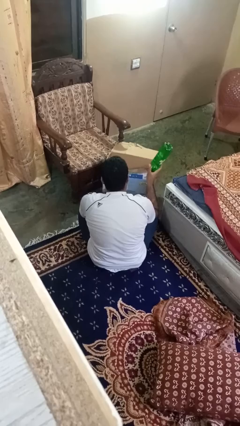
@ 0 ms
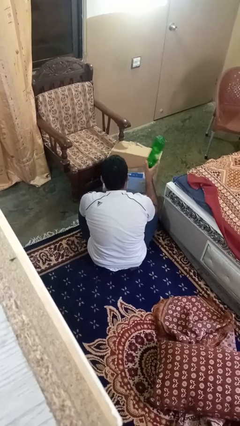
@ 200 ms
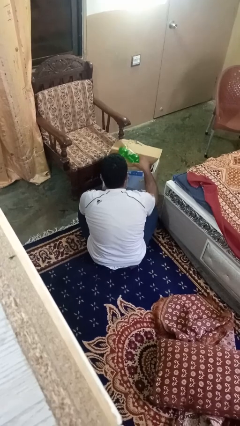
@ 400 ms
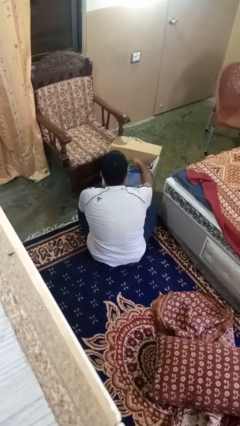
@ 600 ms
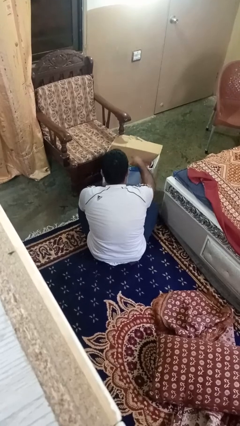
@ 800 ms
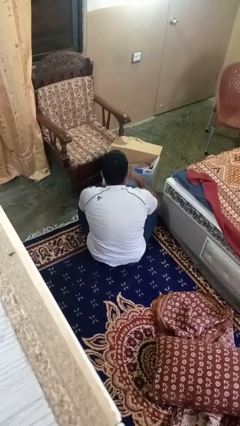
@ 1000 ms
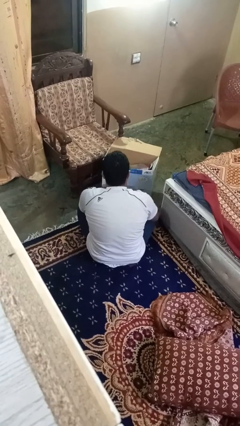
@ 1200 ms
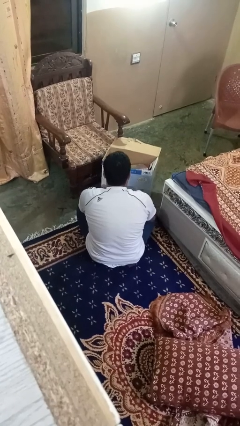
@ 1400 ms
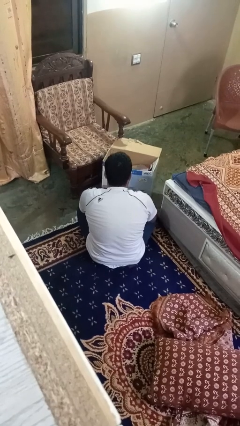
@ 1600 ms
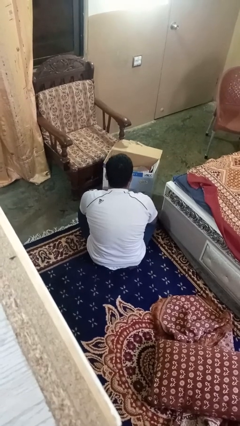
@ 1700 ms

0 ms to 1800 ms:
person puts object into box

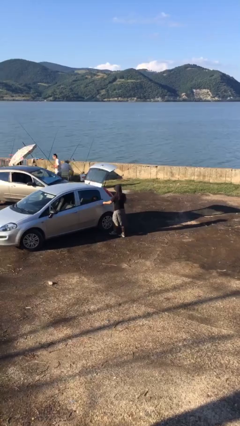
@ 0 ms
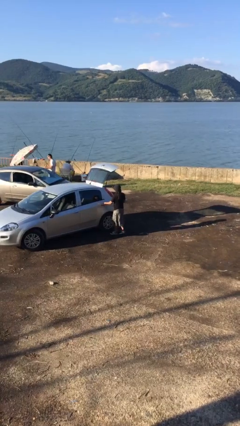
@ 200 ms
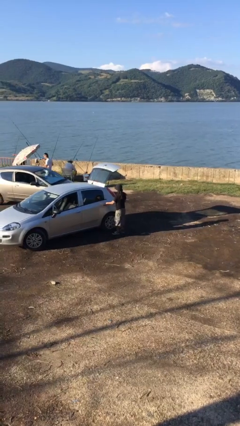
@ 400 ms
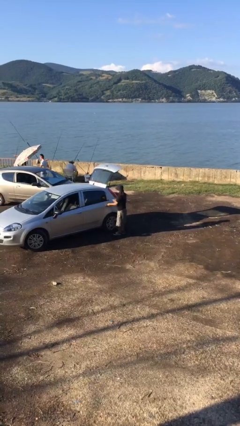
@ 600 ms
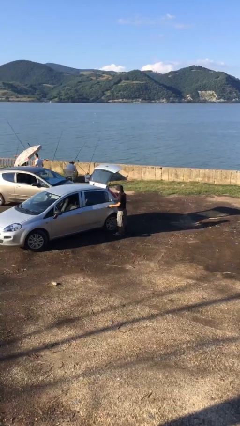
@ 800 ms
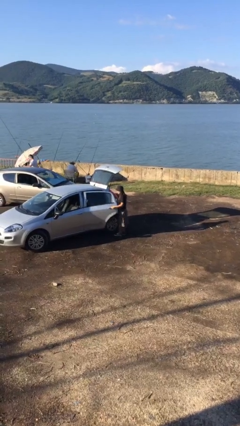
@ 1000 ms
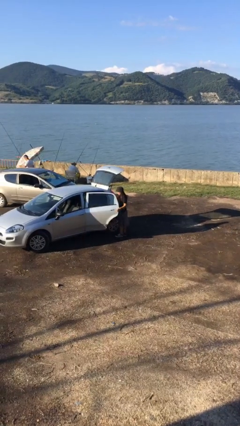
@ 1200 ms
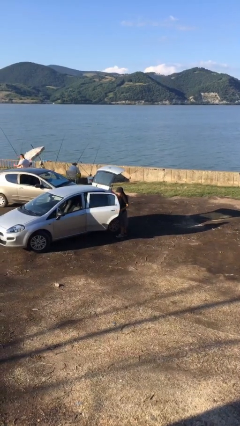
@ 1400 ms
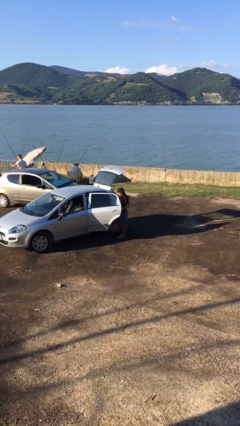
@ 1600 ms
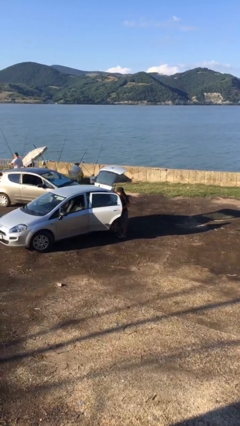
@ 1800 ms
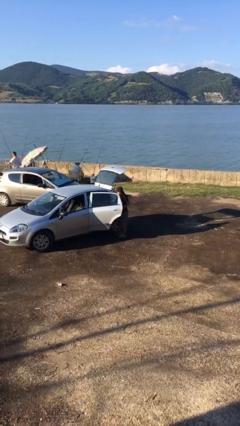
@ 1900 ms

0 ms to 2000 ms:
person opens car door

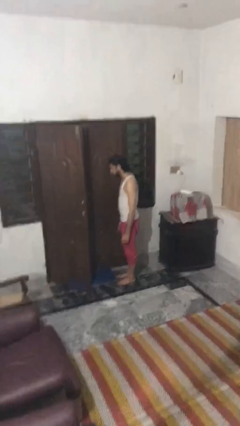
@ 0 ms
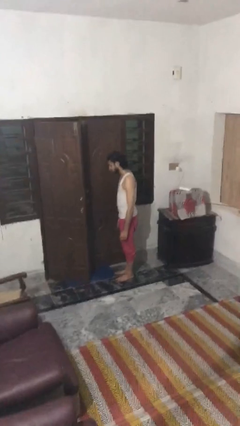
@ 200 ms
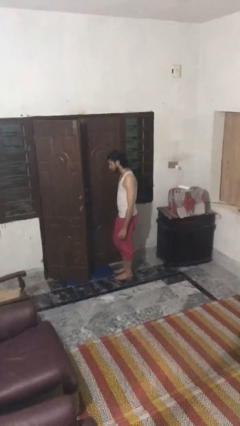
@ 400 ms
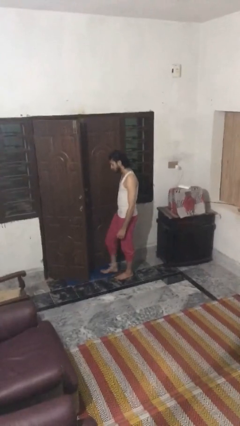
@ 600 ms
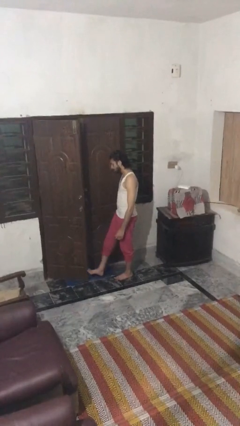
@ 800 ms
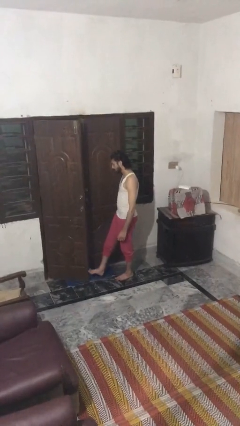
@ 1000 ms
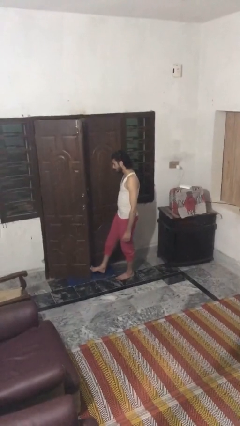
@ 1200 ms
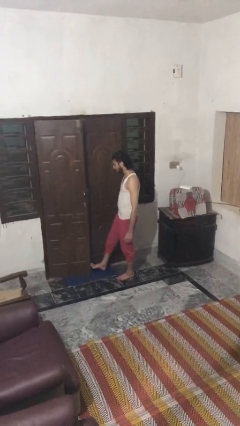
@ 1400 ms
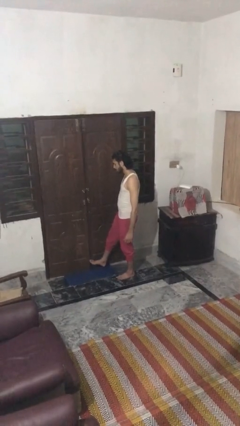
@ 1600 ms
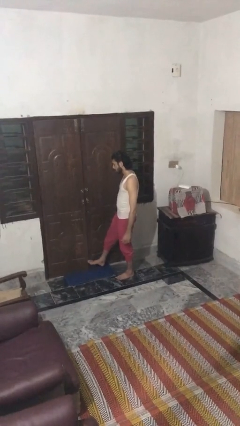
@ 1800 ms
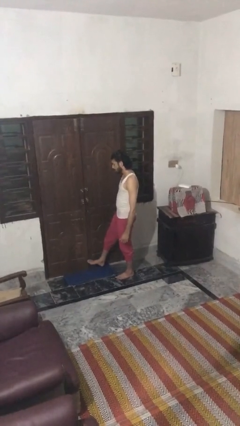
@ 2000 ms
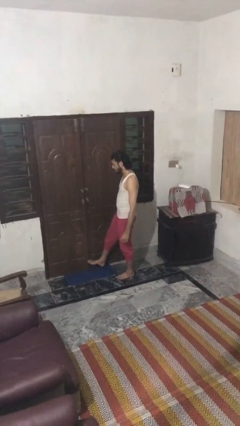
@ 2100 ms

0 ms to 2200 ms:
person closes door with foot

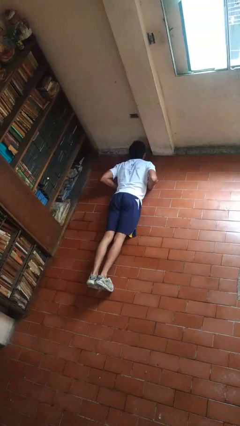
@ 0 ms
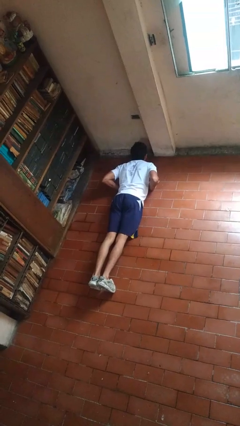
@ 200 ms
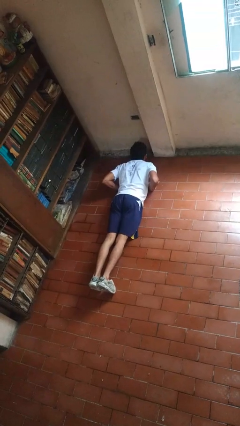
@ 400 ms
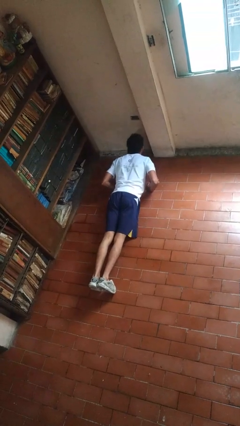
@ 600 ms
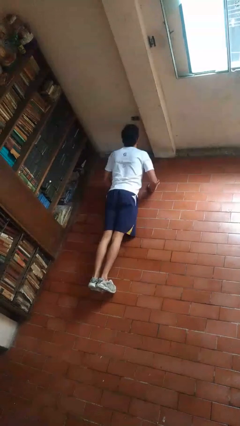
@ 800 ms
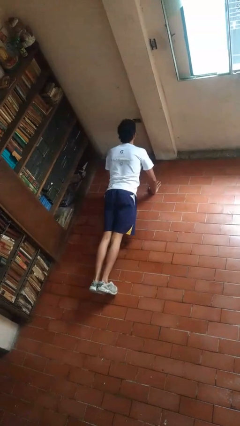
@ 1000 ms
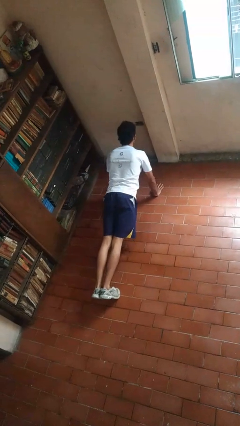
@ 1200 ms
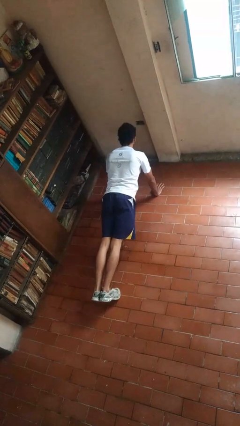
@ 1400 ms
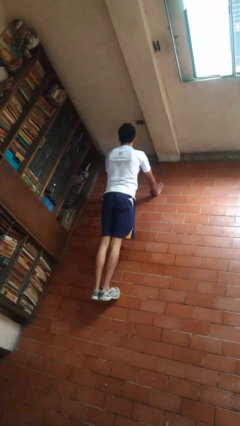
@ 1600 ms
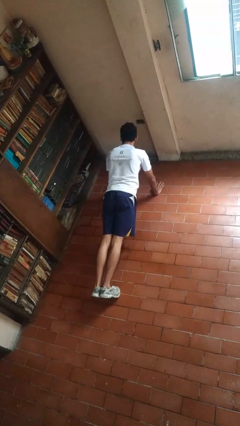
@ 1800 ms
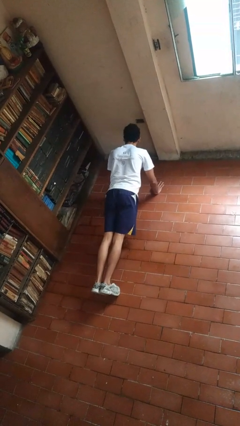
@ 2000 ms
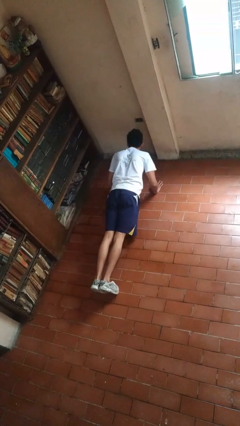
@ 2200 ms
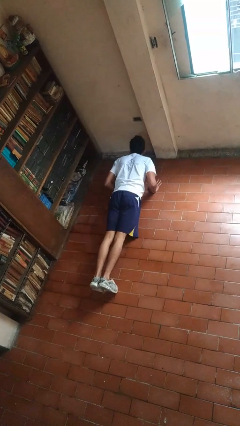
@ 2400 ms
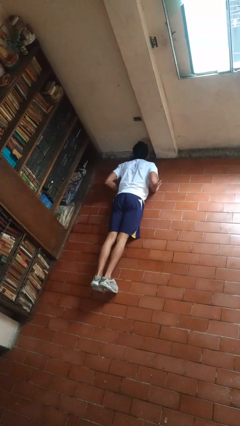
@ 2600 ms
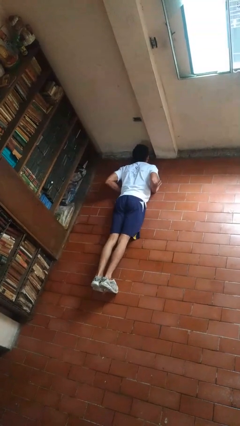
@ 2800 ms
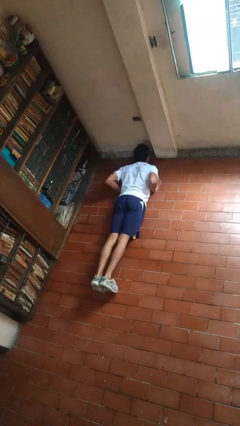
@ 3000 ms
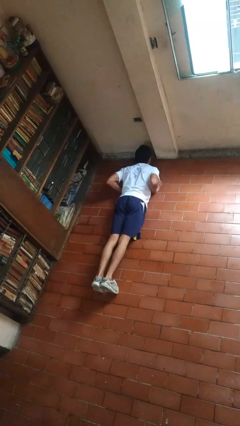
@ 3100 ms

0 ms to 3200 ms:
person exercises with pushup

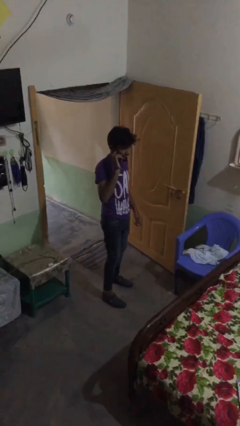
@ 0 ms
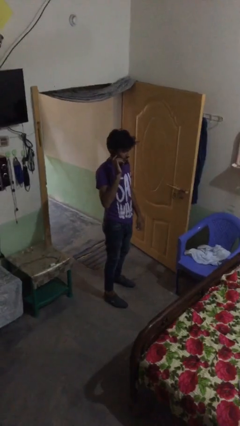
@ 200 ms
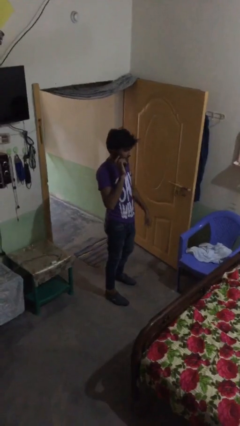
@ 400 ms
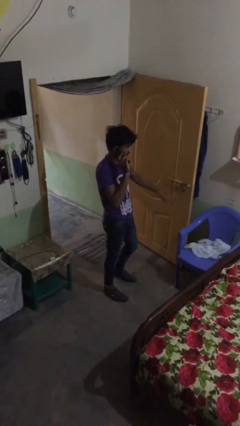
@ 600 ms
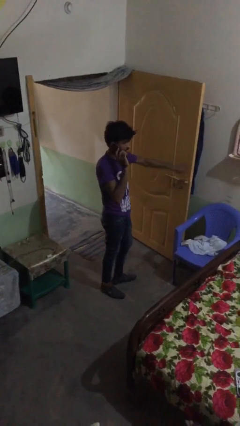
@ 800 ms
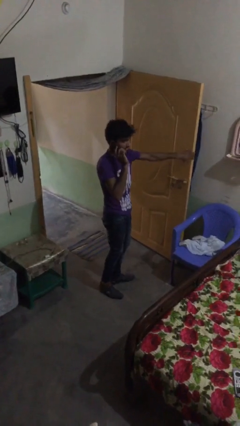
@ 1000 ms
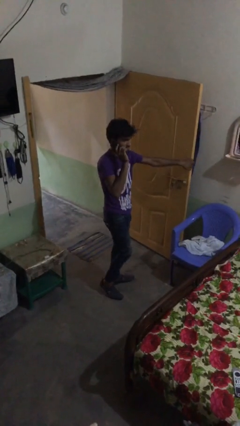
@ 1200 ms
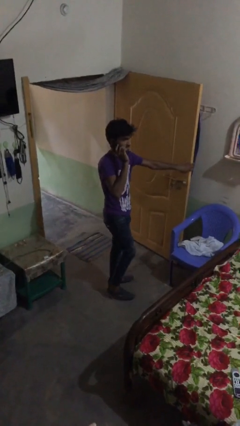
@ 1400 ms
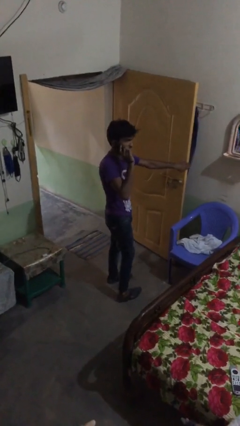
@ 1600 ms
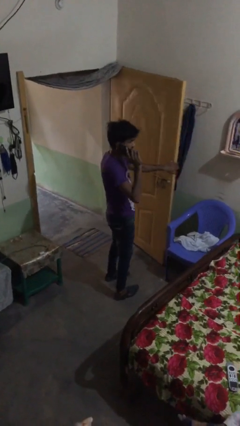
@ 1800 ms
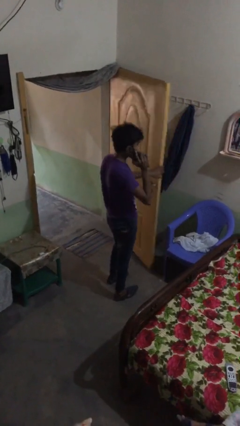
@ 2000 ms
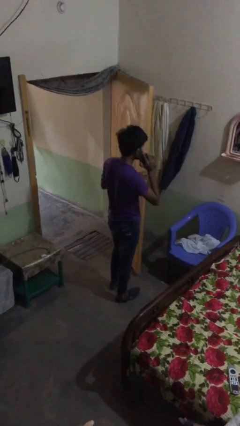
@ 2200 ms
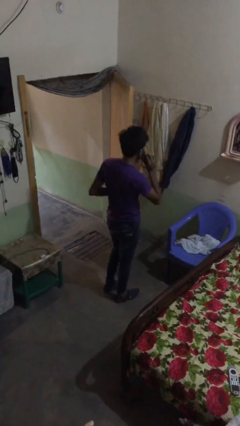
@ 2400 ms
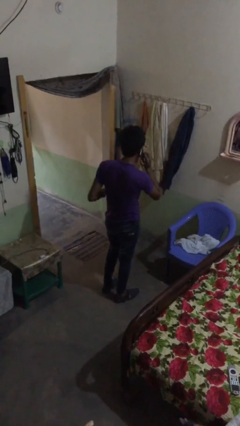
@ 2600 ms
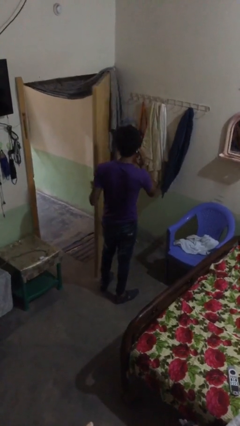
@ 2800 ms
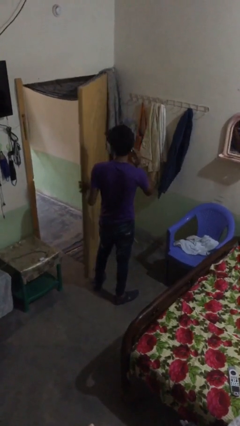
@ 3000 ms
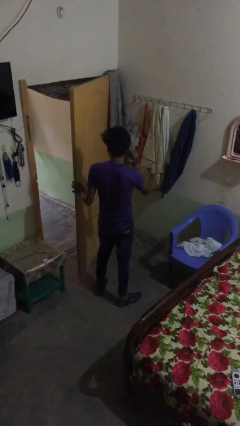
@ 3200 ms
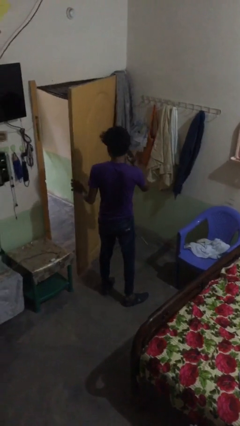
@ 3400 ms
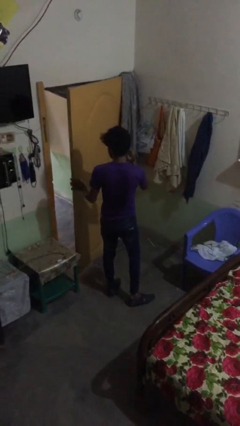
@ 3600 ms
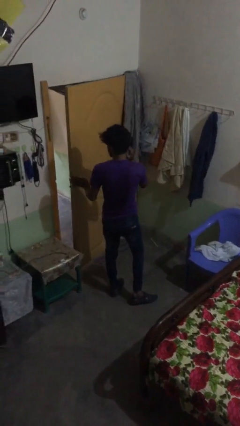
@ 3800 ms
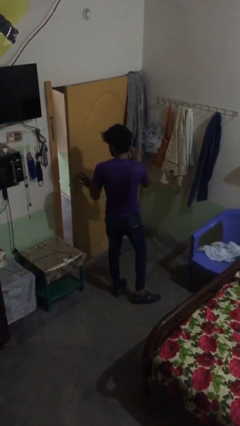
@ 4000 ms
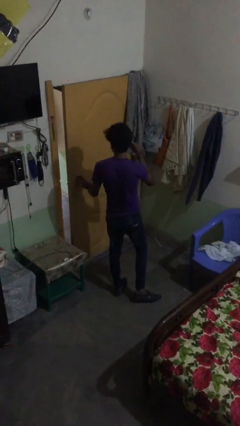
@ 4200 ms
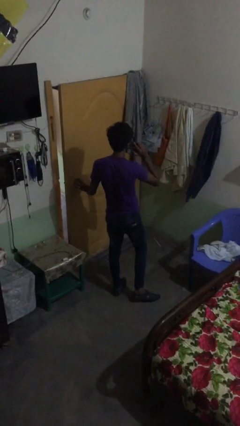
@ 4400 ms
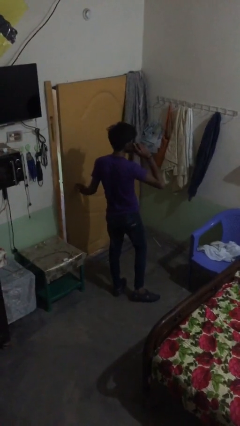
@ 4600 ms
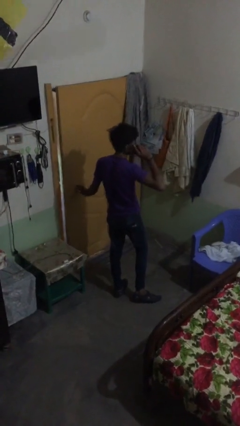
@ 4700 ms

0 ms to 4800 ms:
person closes facility door

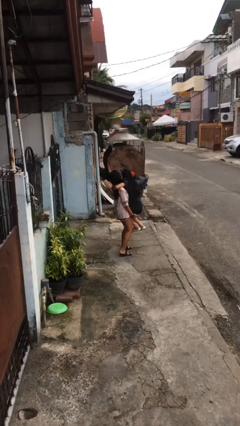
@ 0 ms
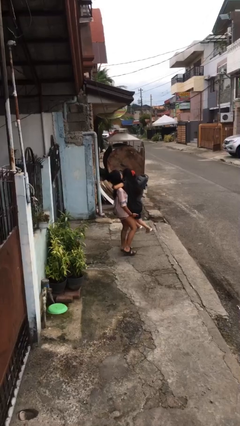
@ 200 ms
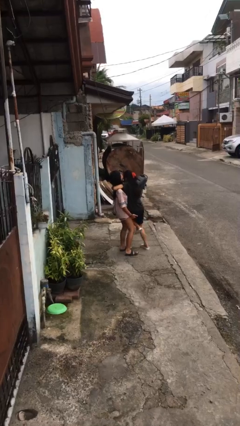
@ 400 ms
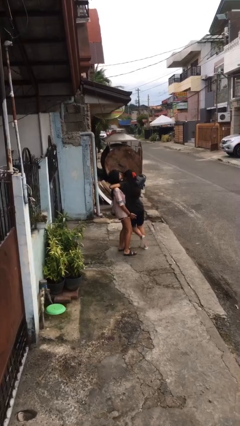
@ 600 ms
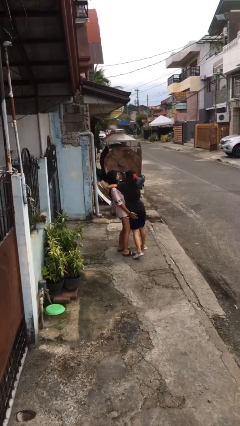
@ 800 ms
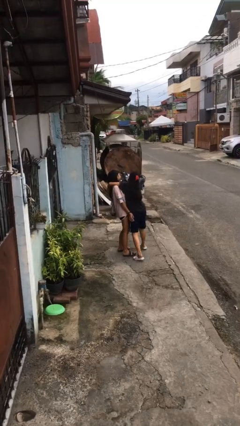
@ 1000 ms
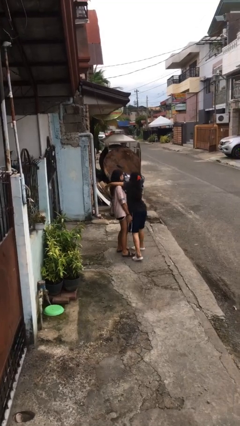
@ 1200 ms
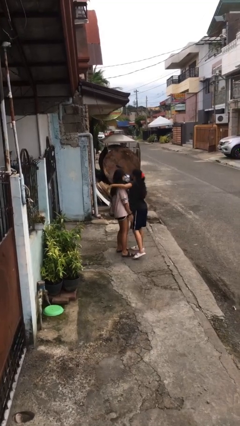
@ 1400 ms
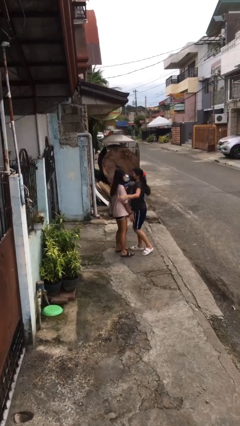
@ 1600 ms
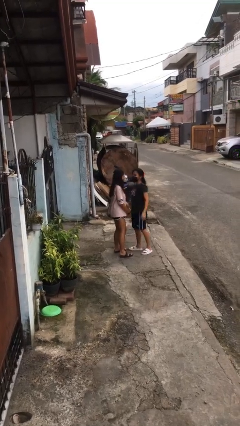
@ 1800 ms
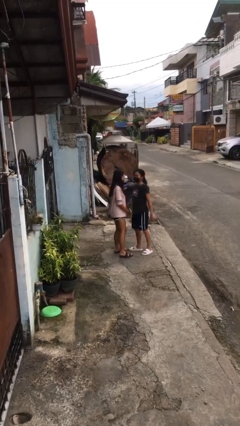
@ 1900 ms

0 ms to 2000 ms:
person puts down person

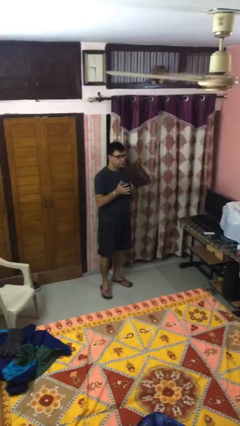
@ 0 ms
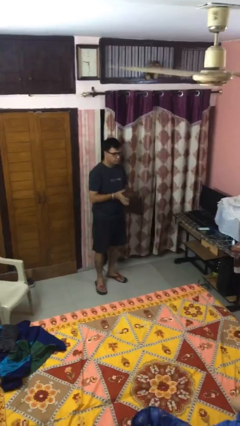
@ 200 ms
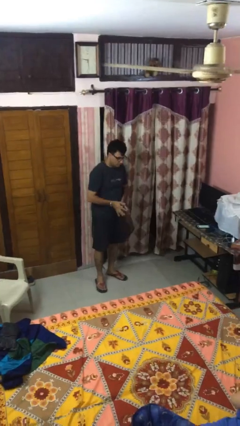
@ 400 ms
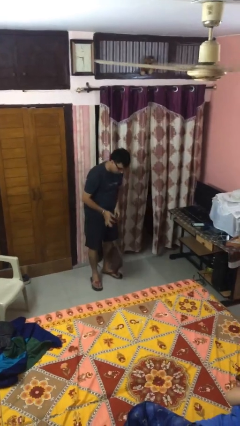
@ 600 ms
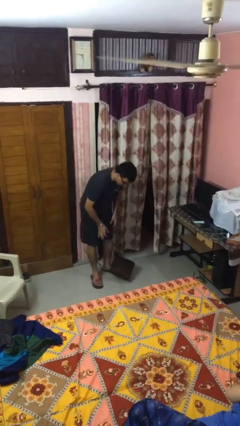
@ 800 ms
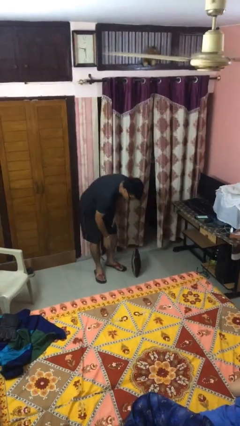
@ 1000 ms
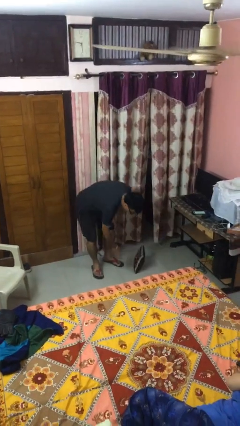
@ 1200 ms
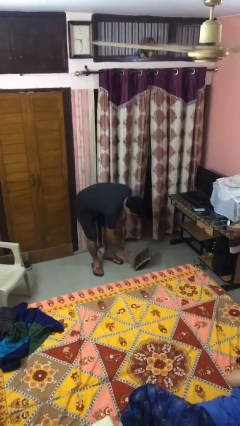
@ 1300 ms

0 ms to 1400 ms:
person drops object
